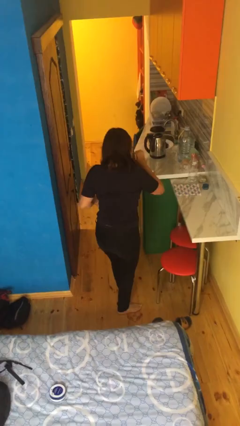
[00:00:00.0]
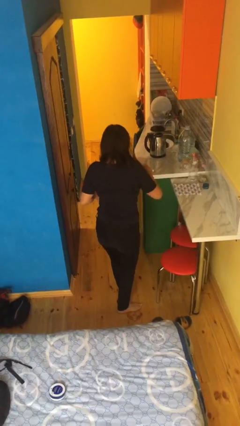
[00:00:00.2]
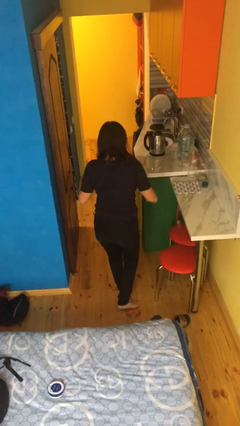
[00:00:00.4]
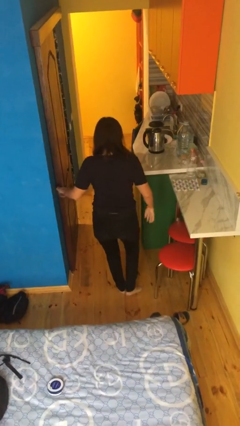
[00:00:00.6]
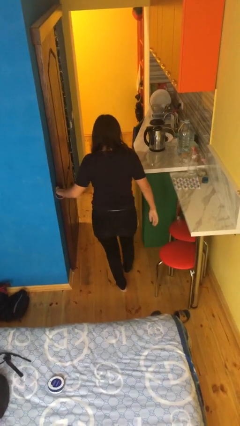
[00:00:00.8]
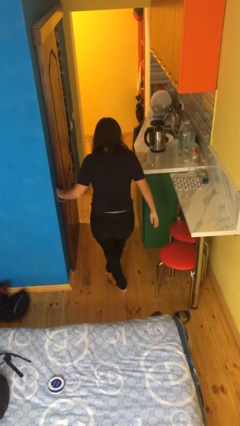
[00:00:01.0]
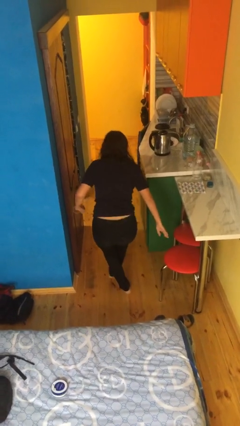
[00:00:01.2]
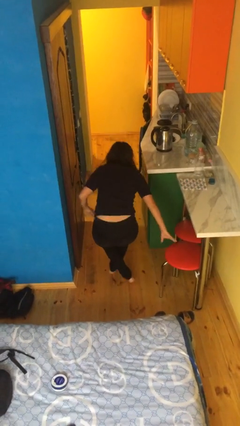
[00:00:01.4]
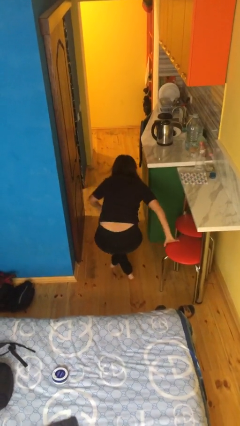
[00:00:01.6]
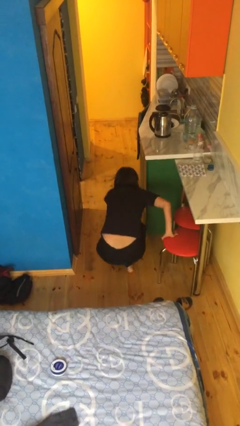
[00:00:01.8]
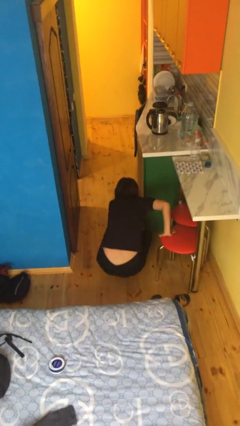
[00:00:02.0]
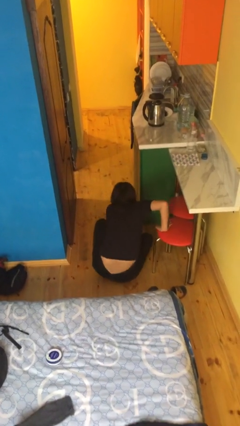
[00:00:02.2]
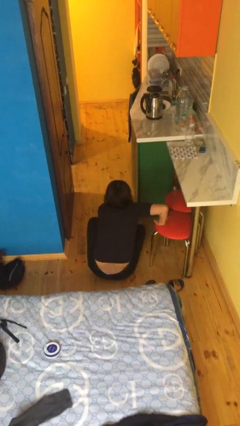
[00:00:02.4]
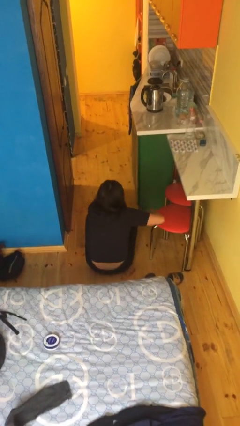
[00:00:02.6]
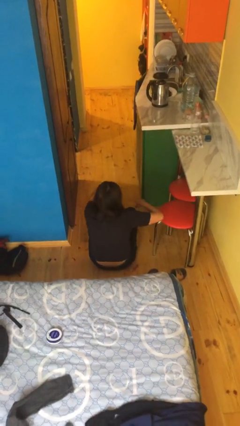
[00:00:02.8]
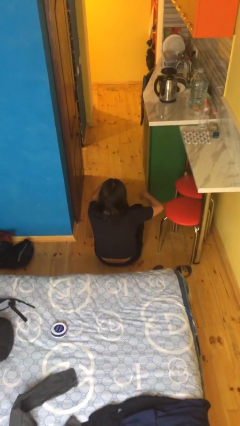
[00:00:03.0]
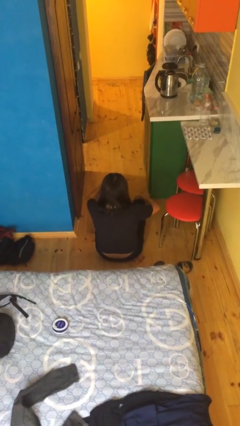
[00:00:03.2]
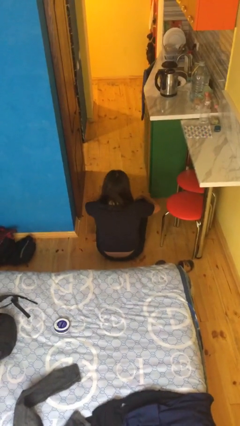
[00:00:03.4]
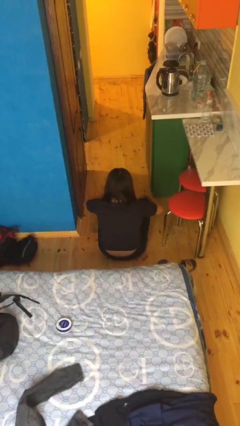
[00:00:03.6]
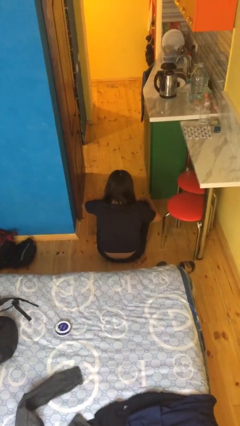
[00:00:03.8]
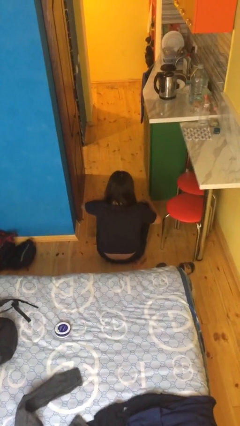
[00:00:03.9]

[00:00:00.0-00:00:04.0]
person sits crisscross

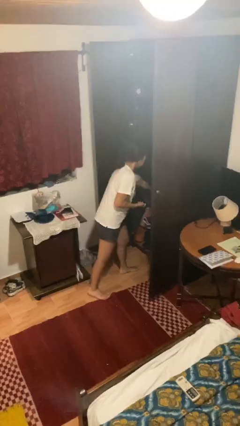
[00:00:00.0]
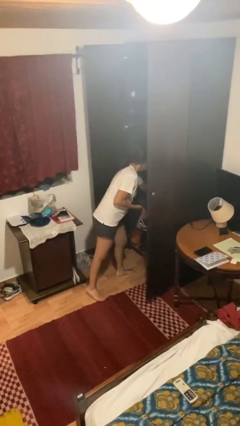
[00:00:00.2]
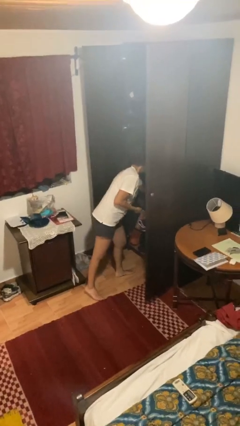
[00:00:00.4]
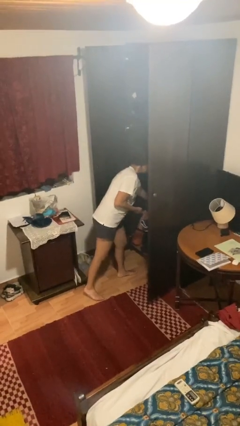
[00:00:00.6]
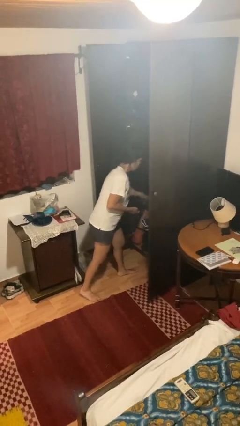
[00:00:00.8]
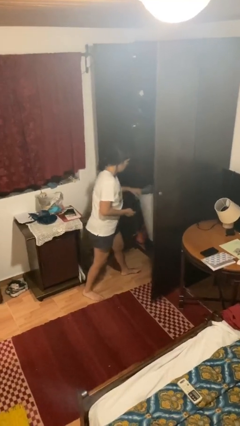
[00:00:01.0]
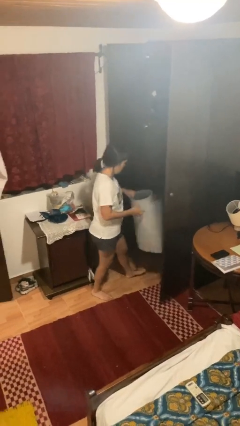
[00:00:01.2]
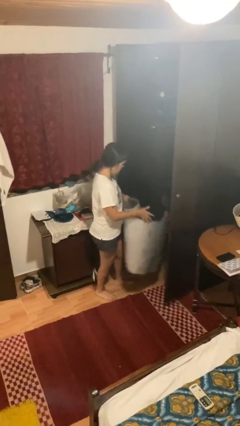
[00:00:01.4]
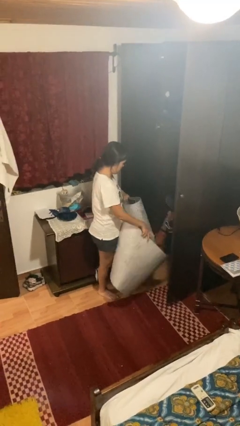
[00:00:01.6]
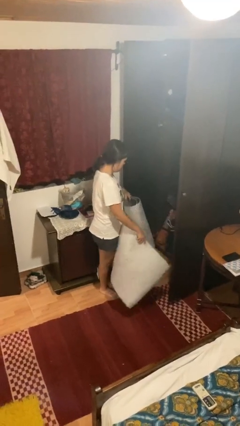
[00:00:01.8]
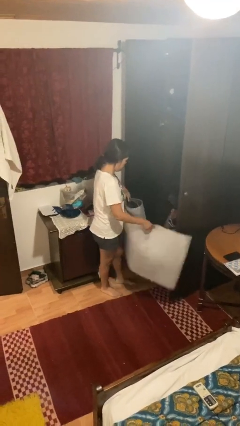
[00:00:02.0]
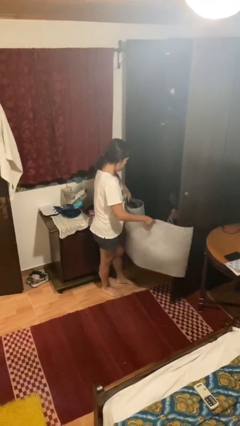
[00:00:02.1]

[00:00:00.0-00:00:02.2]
person picks up object from cabinet

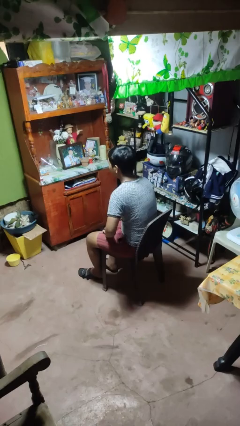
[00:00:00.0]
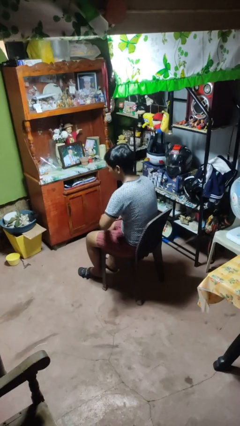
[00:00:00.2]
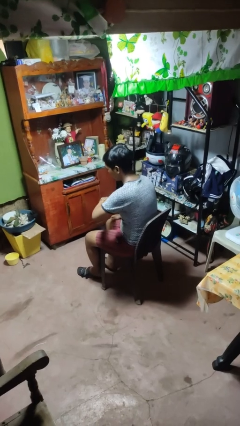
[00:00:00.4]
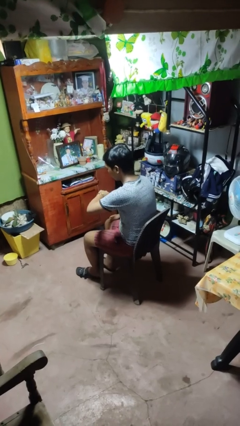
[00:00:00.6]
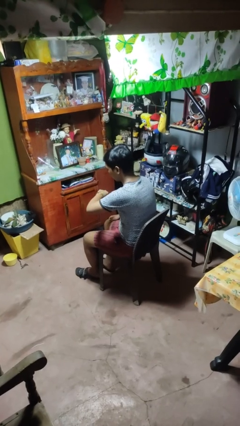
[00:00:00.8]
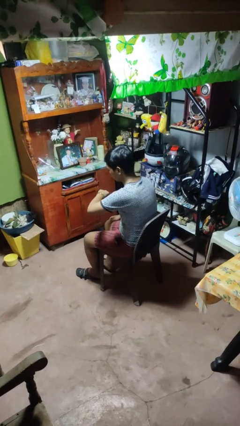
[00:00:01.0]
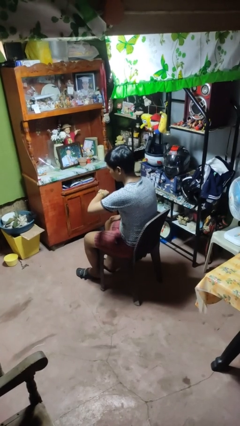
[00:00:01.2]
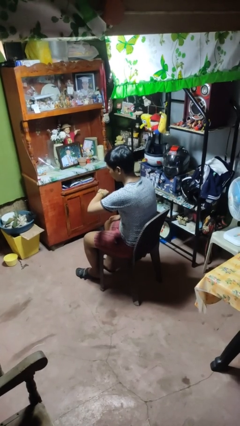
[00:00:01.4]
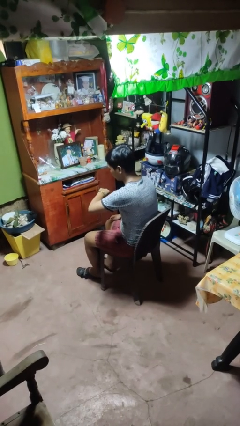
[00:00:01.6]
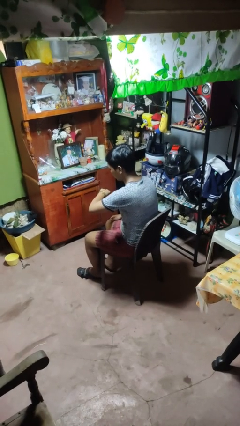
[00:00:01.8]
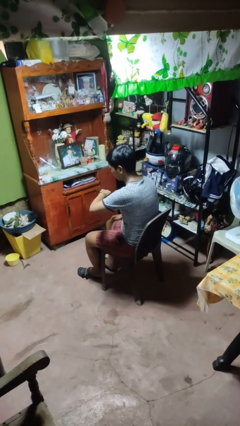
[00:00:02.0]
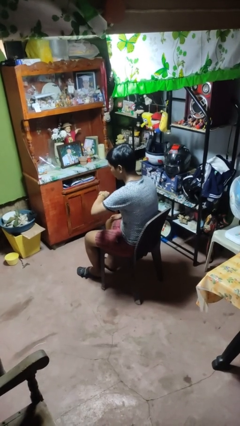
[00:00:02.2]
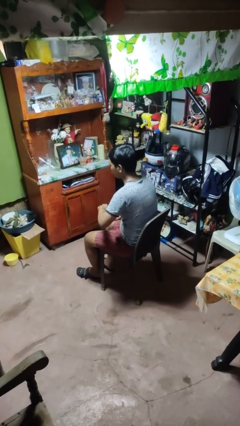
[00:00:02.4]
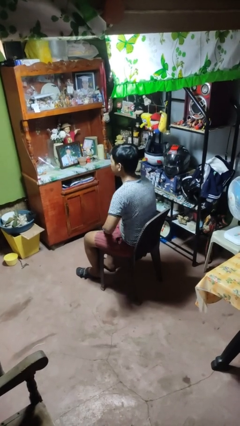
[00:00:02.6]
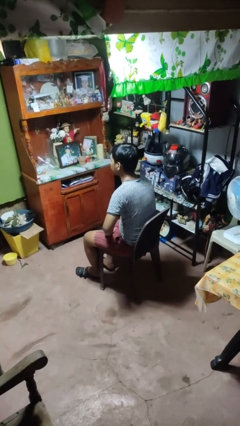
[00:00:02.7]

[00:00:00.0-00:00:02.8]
person looks at wristwatch

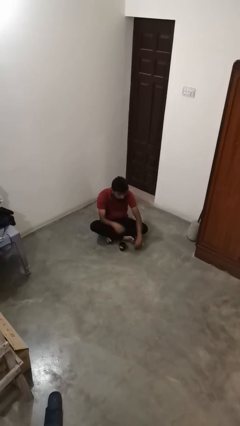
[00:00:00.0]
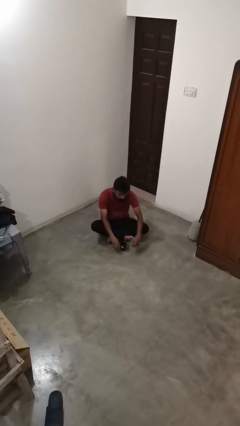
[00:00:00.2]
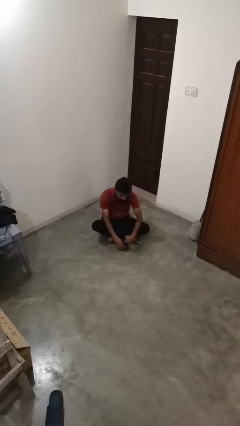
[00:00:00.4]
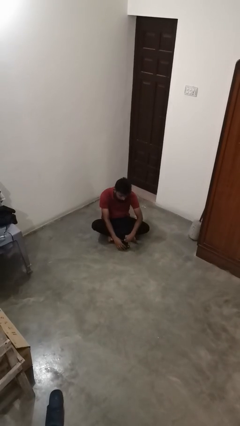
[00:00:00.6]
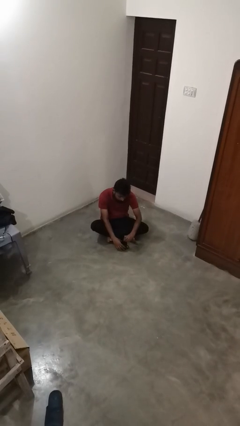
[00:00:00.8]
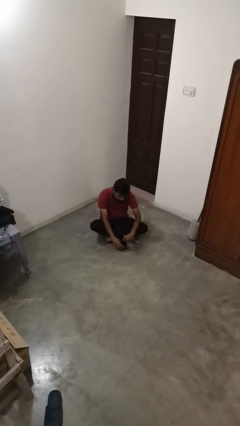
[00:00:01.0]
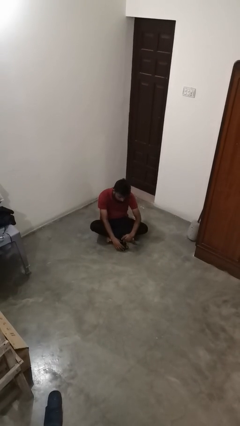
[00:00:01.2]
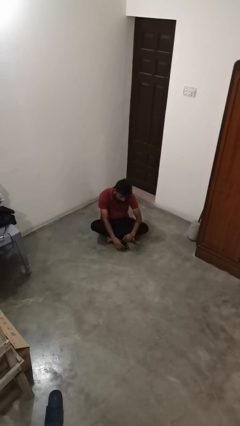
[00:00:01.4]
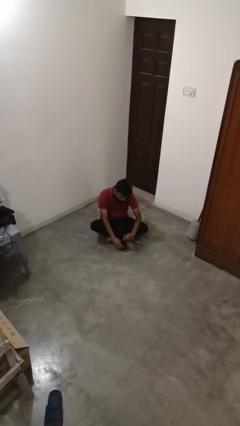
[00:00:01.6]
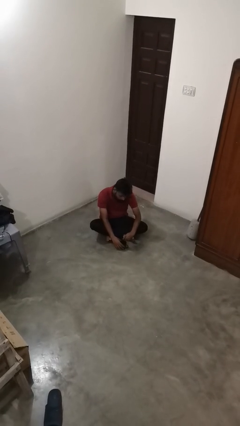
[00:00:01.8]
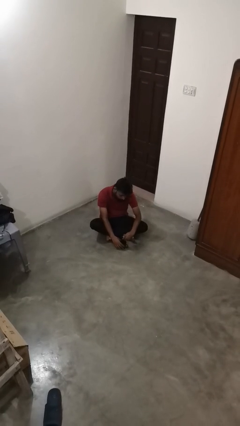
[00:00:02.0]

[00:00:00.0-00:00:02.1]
person stirs mug

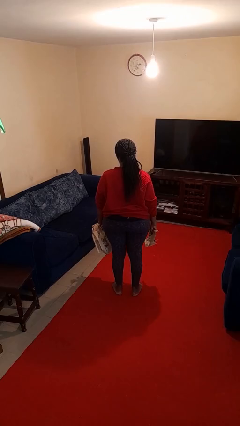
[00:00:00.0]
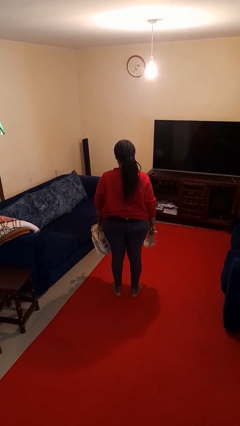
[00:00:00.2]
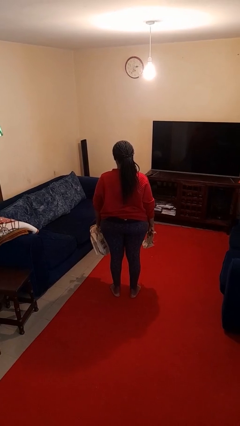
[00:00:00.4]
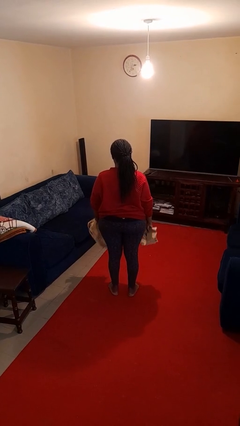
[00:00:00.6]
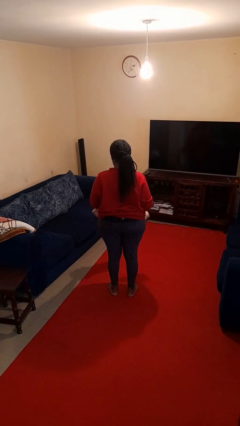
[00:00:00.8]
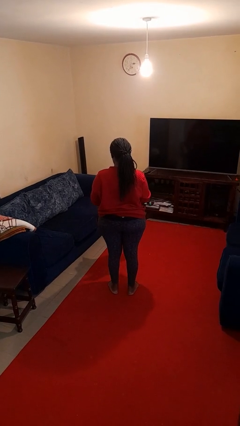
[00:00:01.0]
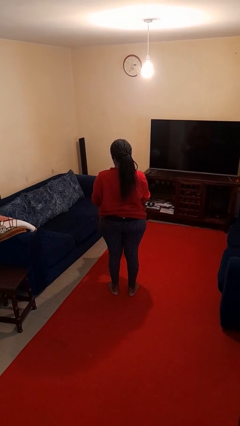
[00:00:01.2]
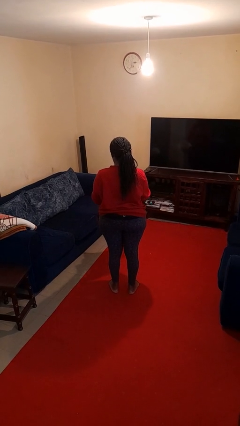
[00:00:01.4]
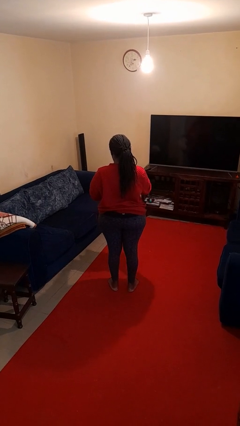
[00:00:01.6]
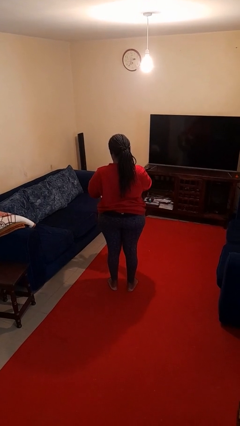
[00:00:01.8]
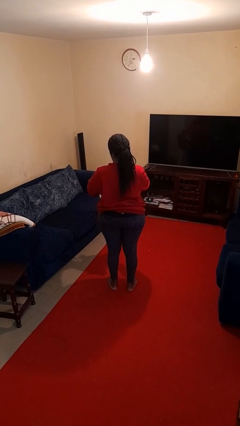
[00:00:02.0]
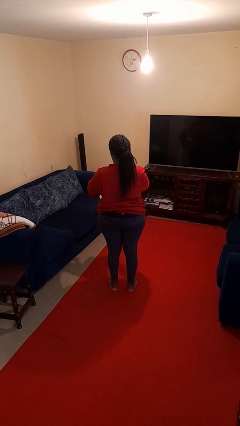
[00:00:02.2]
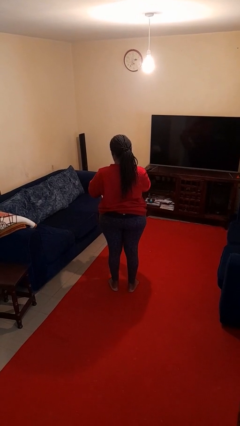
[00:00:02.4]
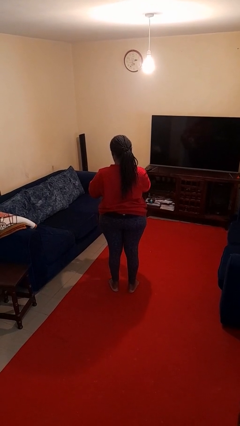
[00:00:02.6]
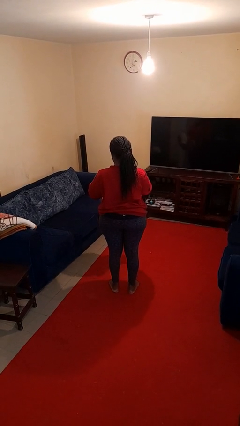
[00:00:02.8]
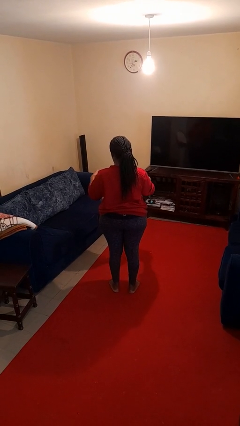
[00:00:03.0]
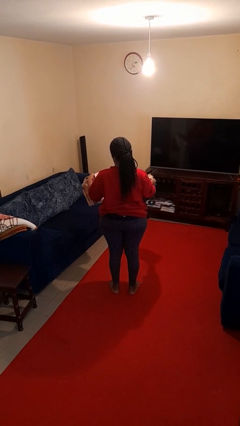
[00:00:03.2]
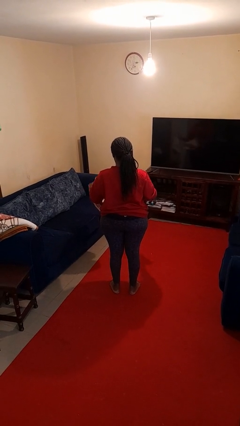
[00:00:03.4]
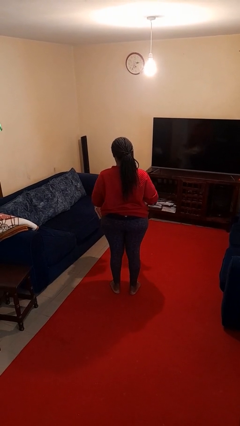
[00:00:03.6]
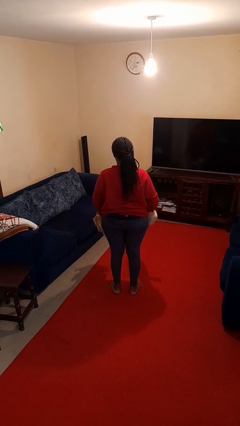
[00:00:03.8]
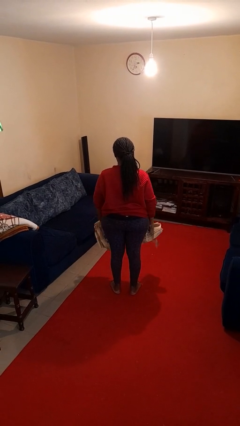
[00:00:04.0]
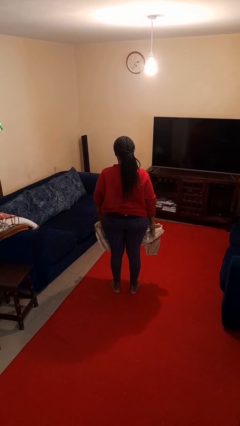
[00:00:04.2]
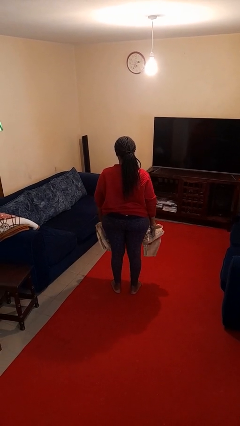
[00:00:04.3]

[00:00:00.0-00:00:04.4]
person tears paper

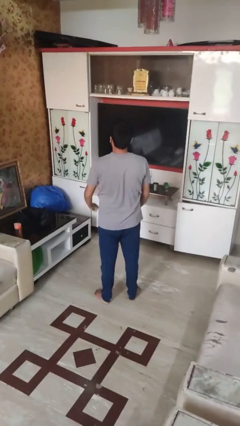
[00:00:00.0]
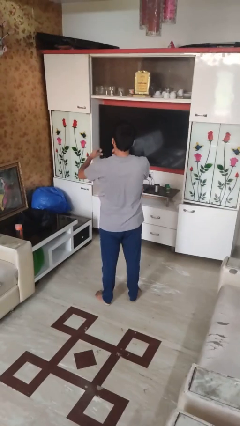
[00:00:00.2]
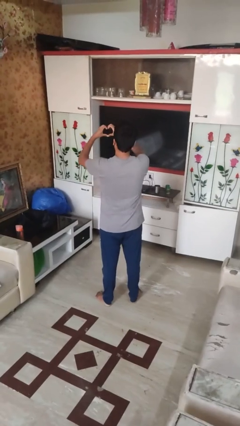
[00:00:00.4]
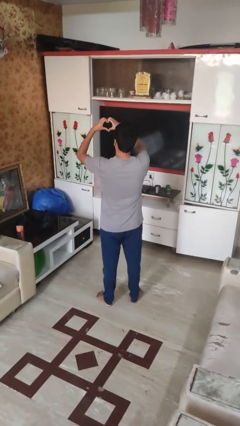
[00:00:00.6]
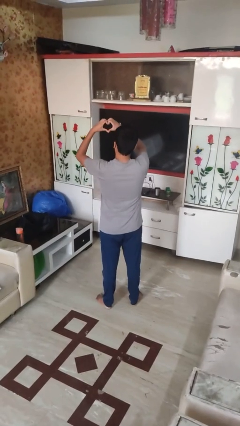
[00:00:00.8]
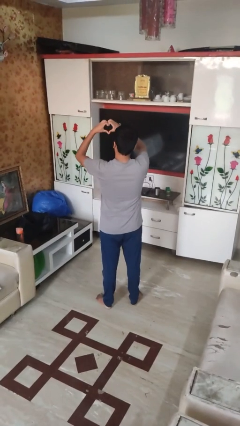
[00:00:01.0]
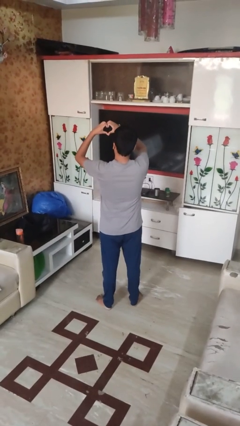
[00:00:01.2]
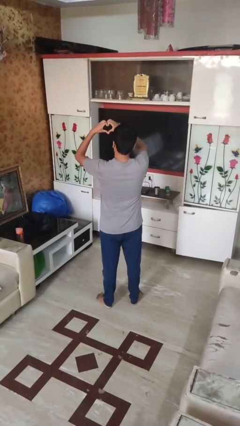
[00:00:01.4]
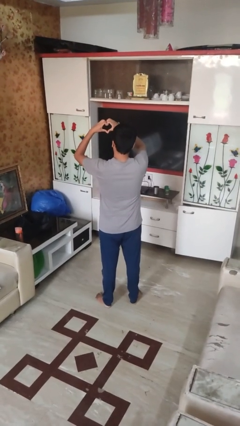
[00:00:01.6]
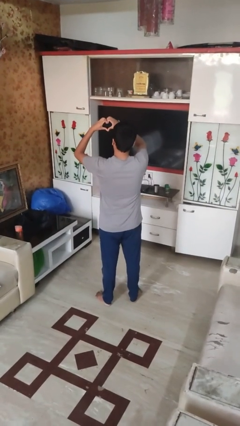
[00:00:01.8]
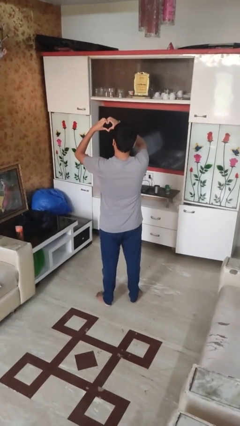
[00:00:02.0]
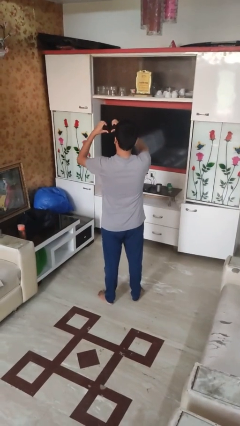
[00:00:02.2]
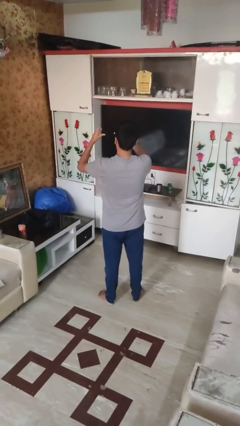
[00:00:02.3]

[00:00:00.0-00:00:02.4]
person gestures heart
